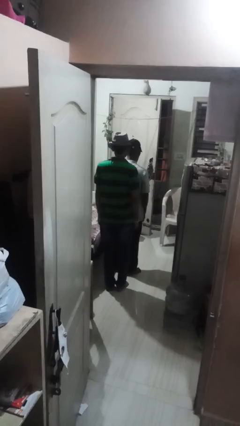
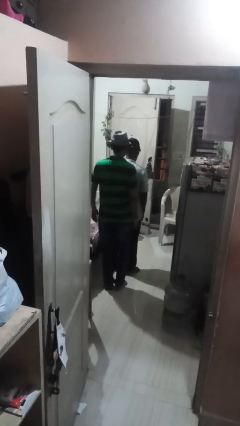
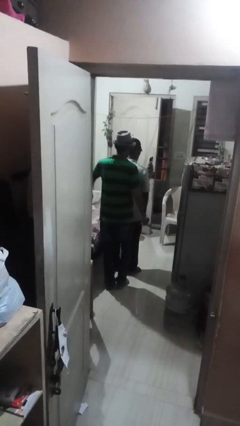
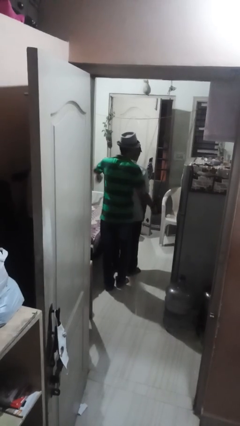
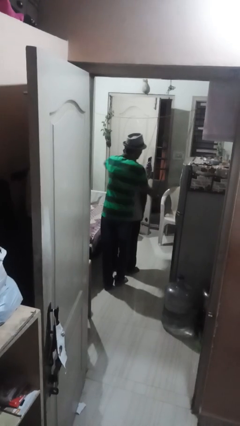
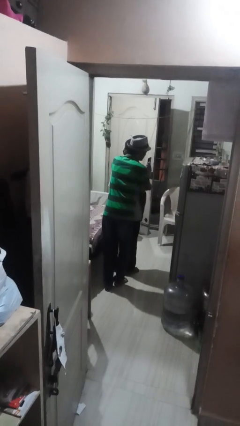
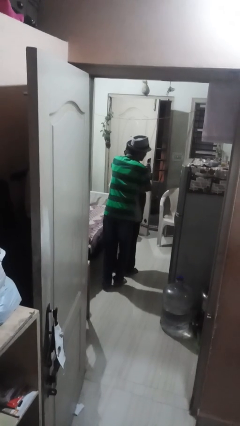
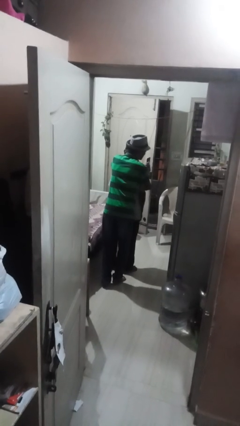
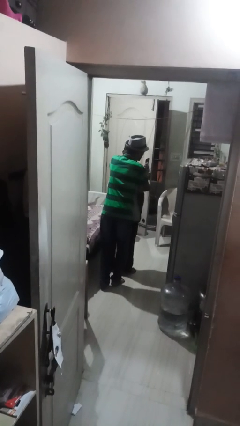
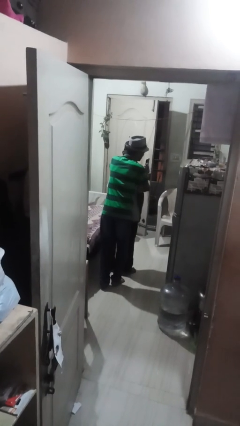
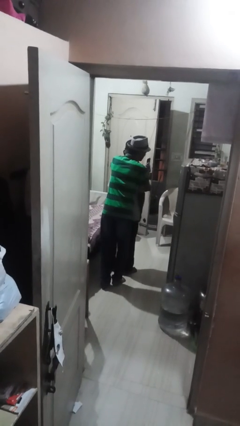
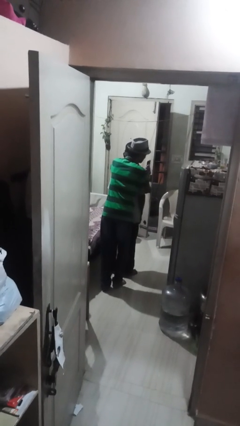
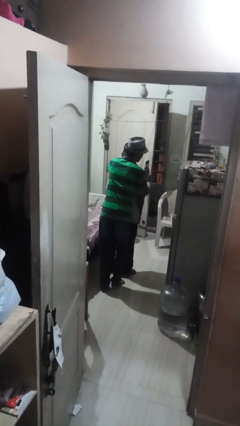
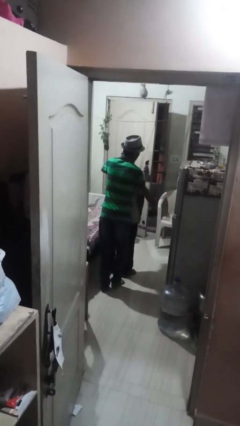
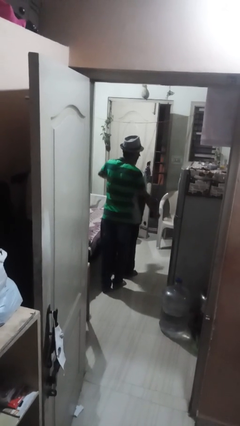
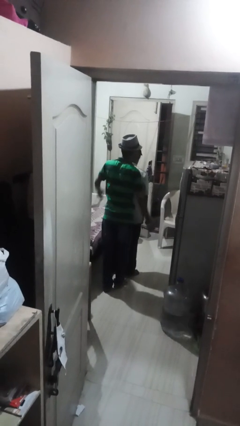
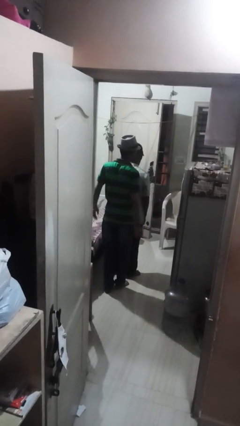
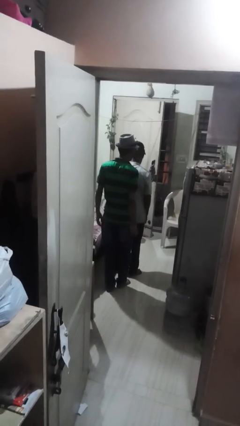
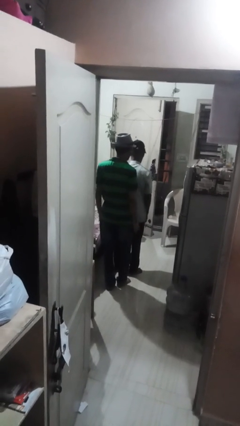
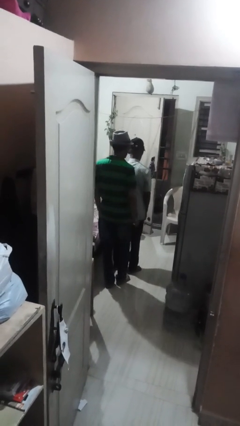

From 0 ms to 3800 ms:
person hugs person from behind

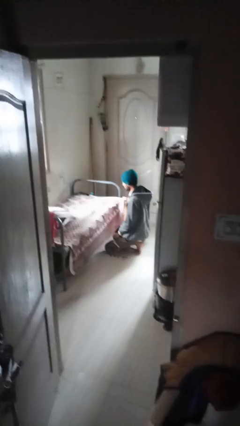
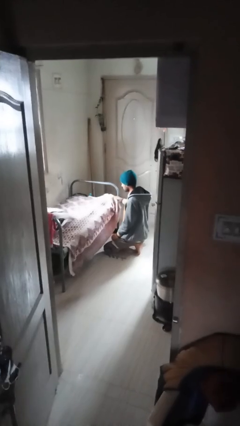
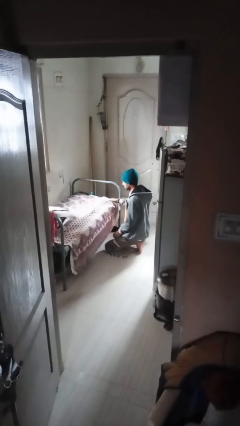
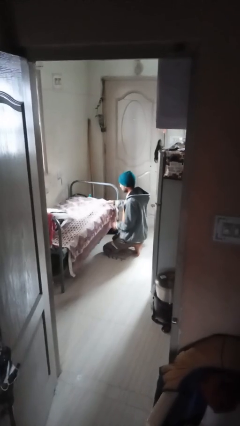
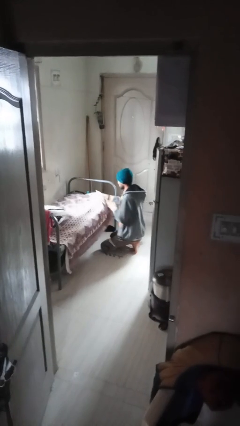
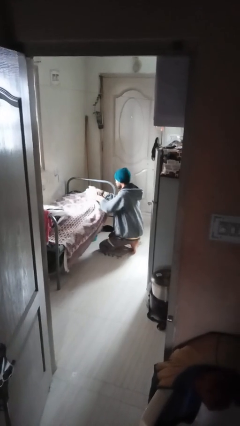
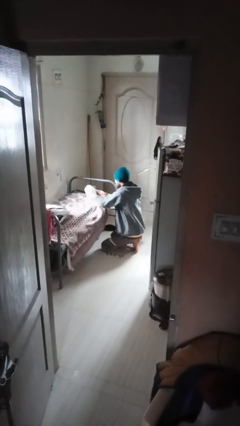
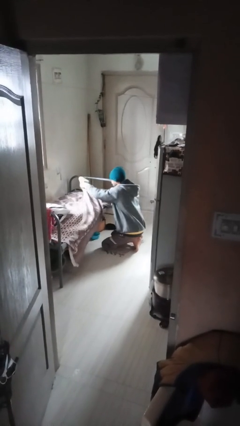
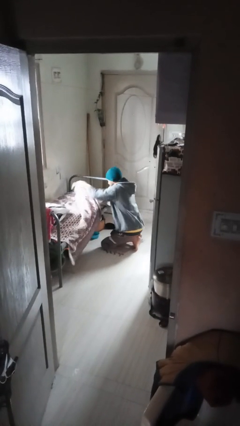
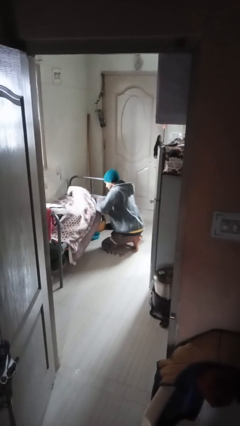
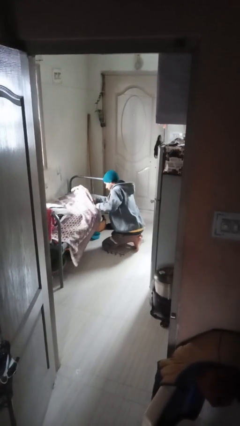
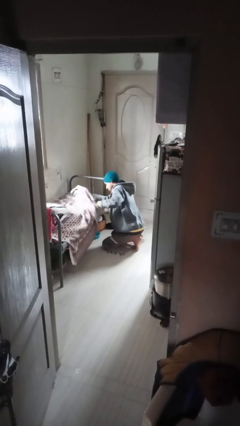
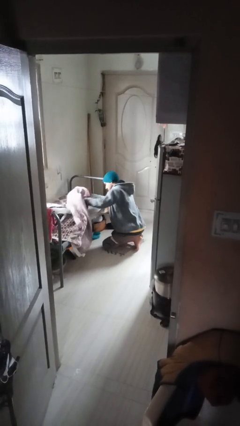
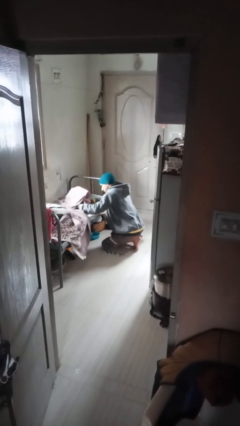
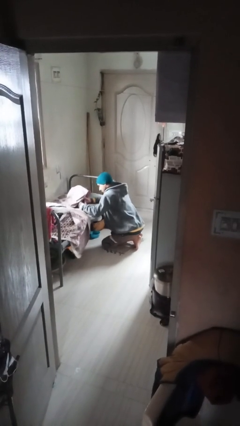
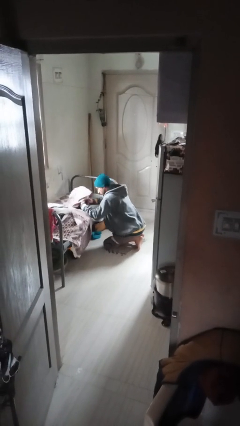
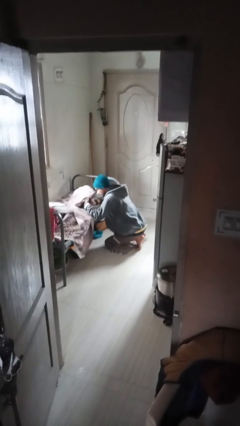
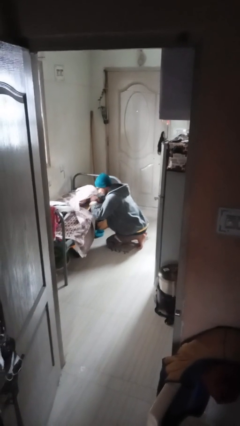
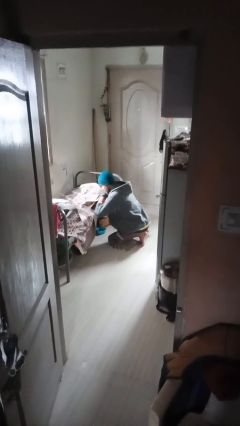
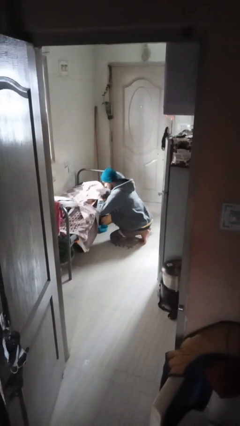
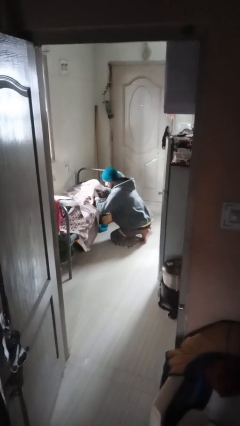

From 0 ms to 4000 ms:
person searches under couch

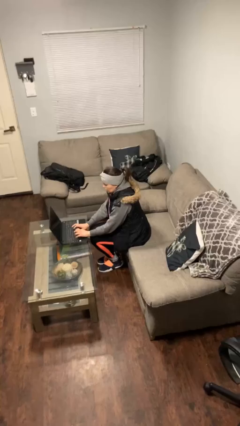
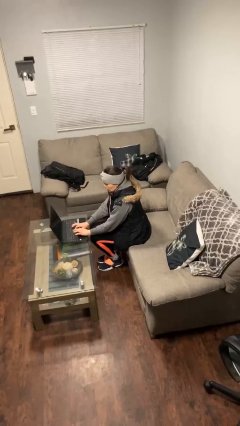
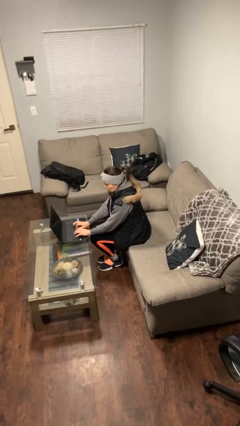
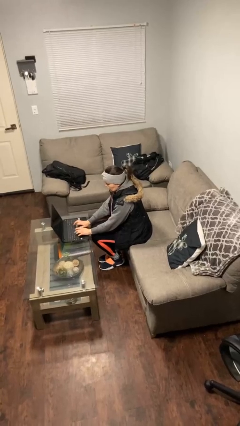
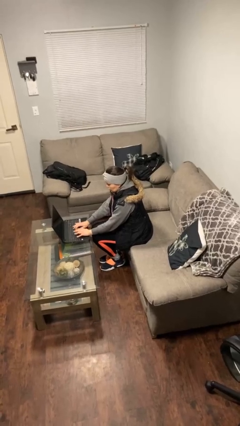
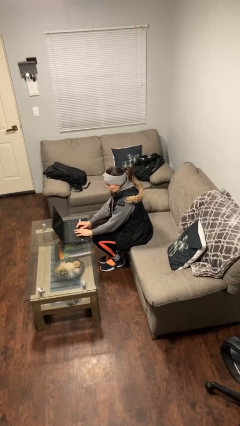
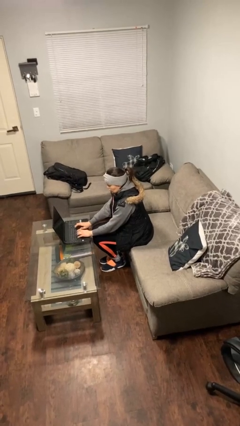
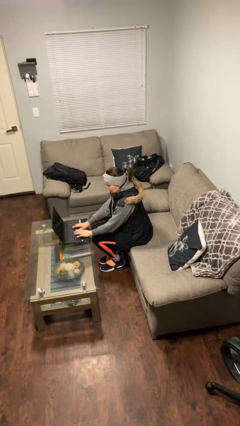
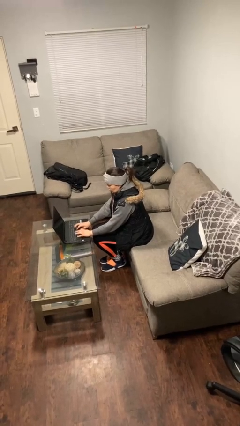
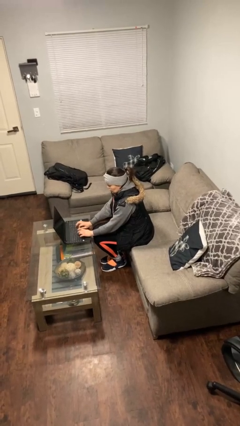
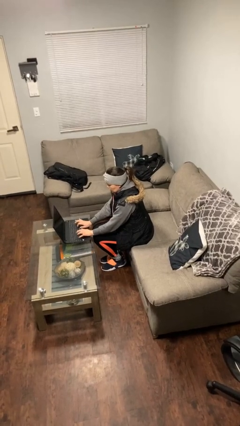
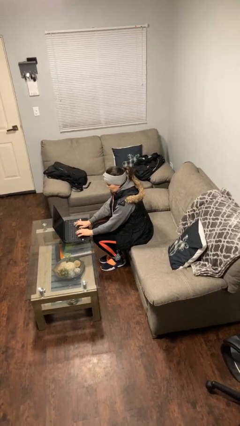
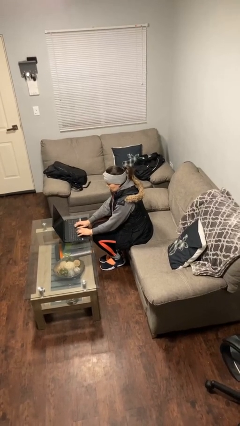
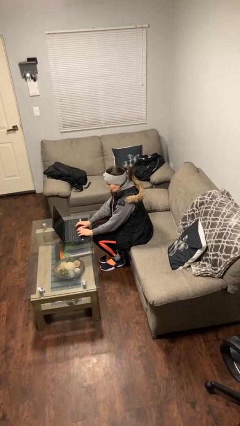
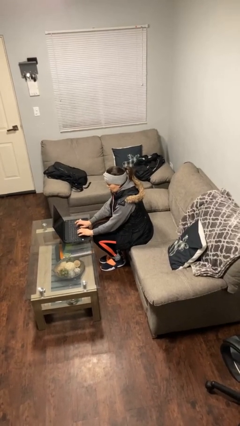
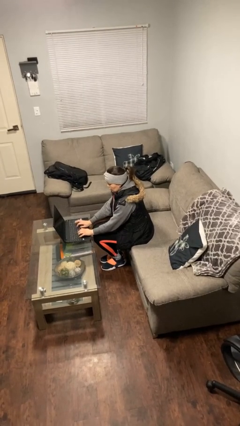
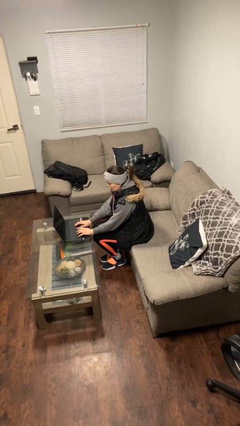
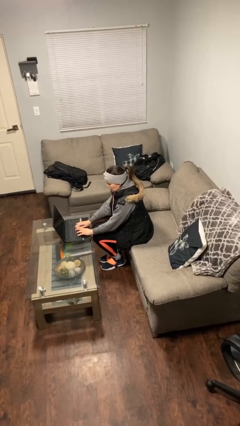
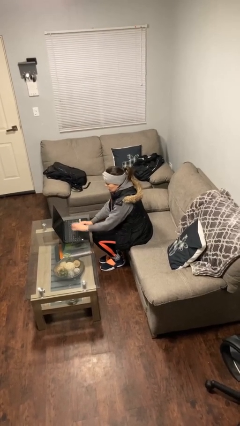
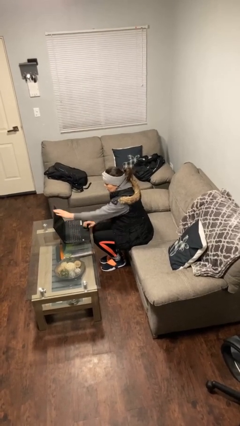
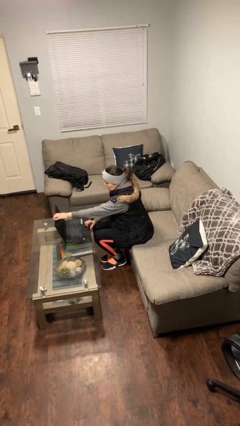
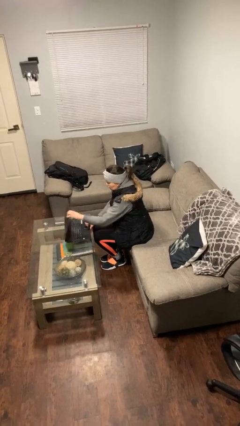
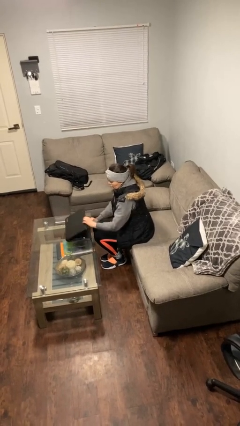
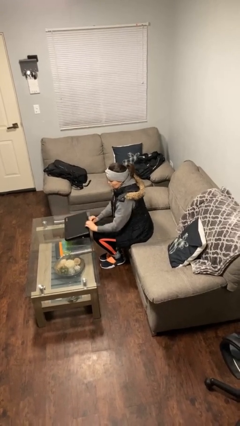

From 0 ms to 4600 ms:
person interacts with laptop

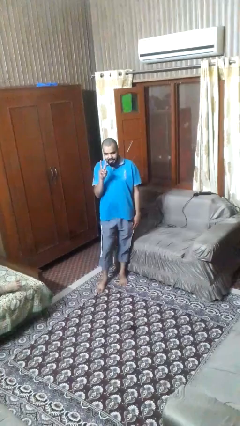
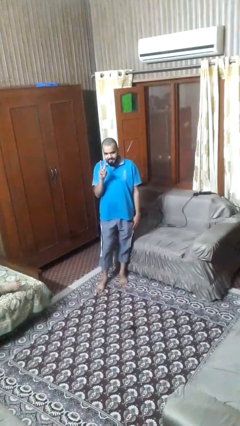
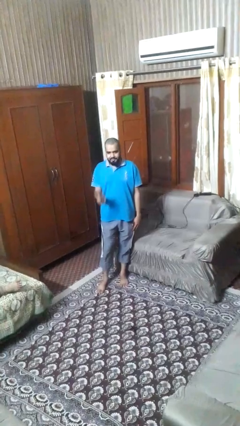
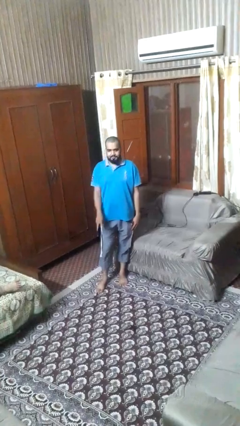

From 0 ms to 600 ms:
person gestures peace

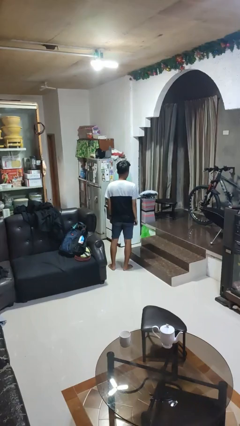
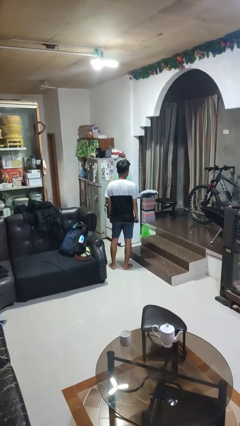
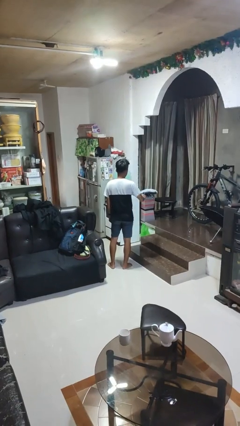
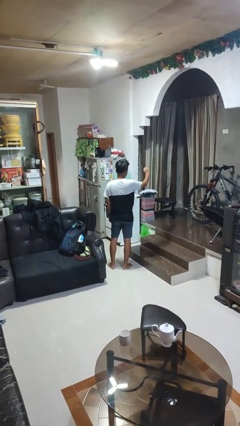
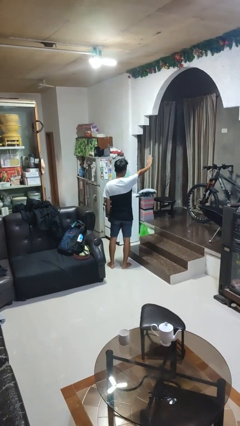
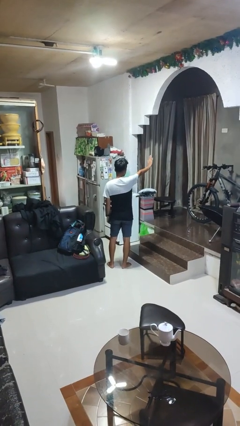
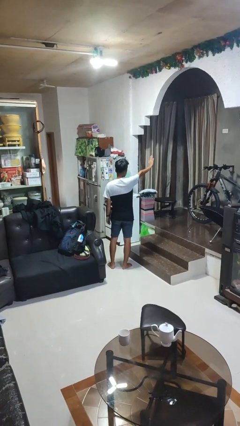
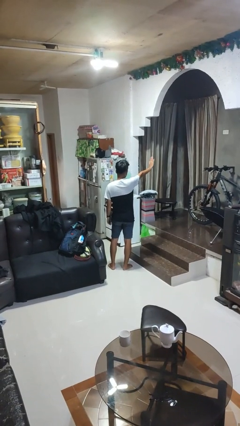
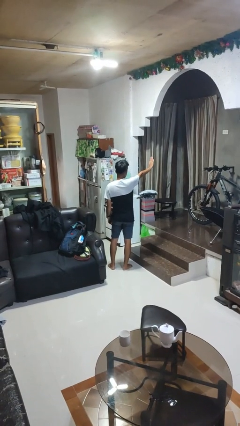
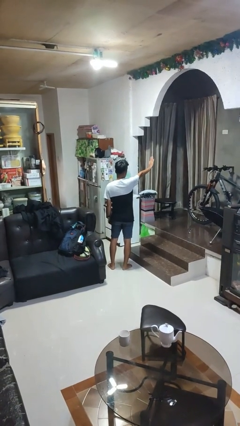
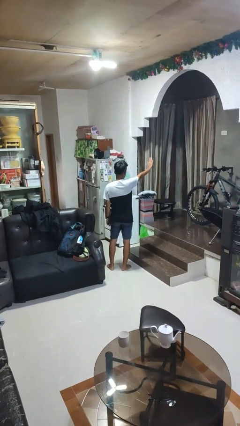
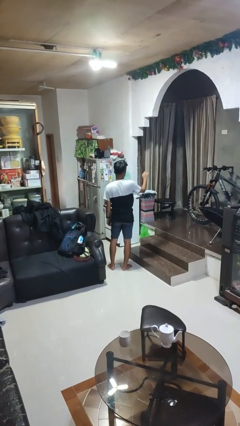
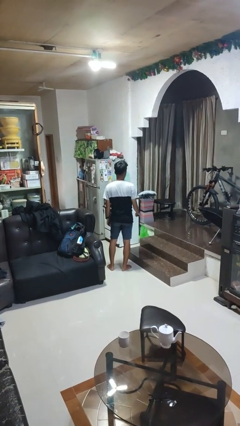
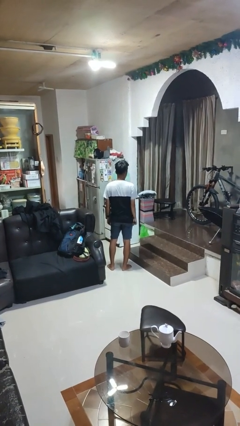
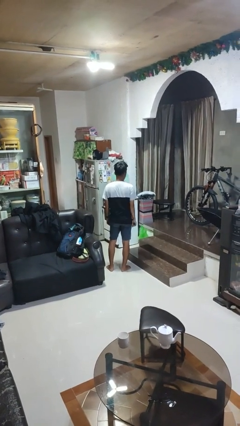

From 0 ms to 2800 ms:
person gestures stop

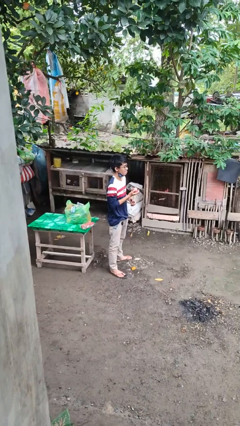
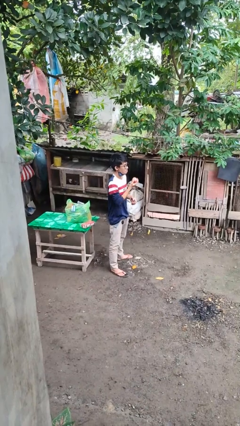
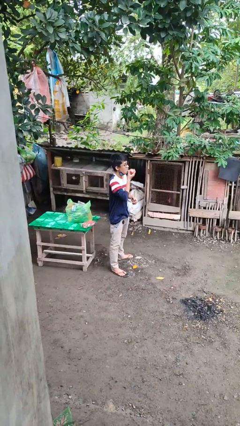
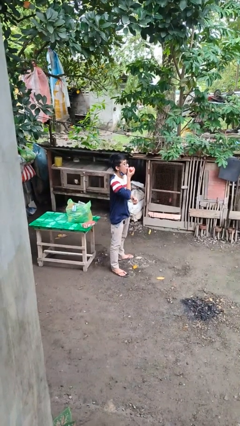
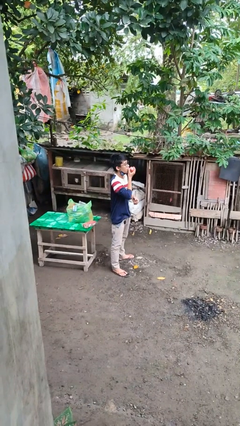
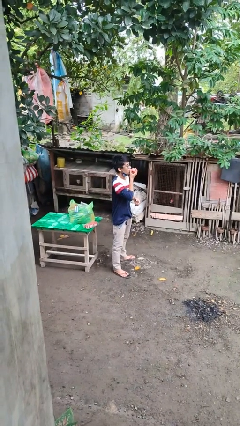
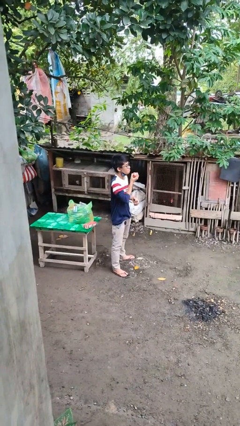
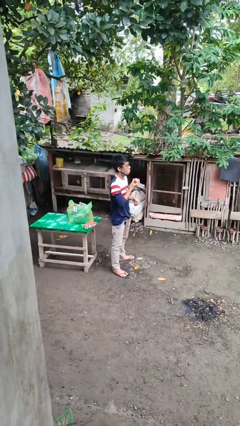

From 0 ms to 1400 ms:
person eats apple

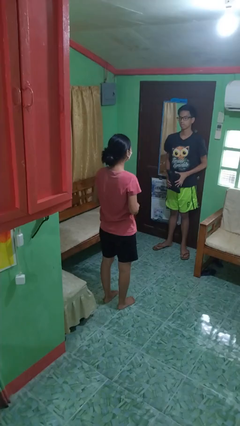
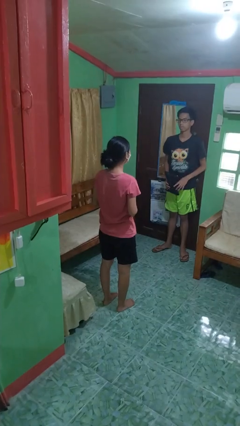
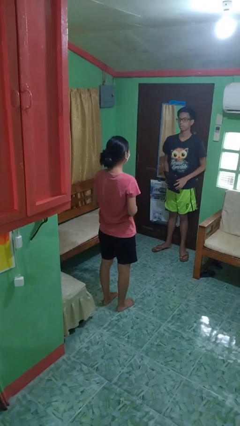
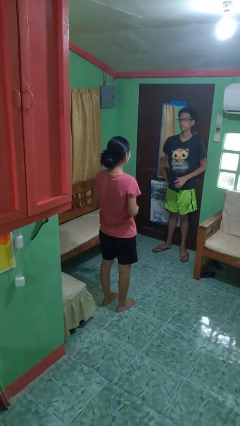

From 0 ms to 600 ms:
person catches object from person
